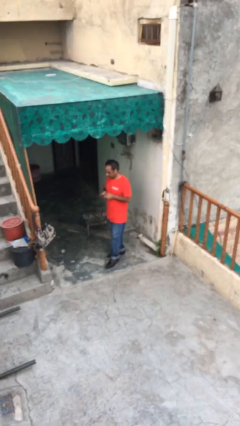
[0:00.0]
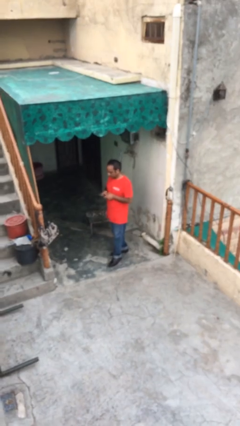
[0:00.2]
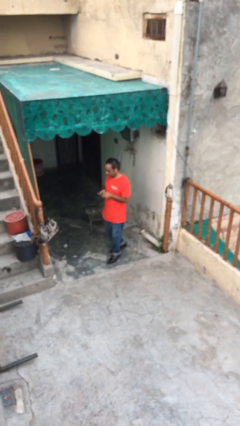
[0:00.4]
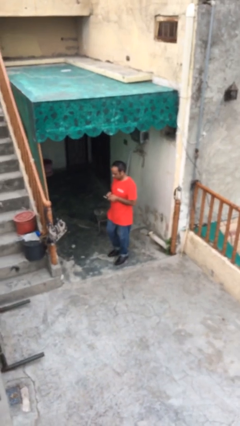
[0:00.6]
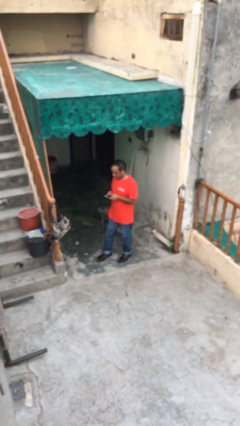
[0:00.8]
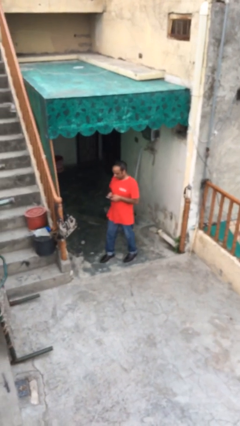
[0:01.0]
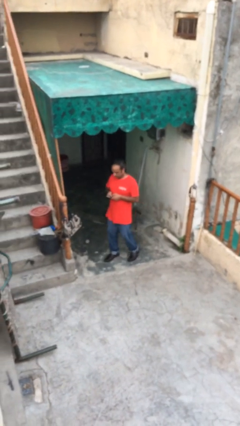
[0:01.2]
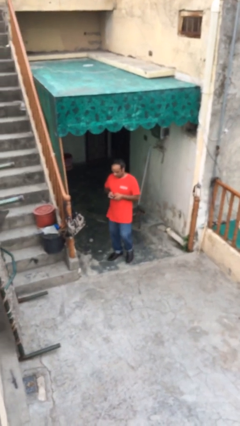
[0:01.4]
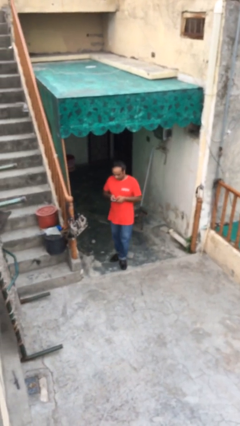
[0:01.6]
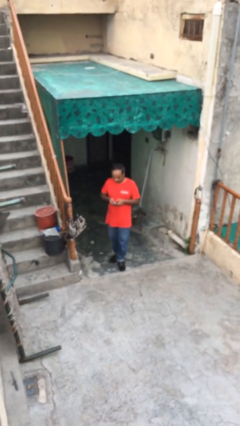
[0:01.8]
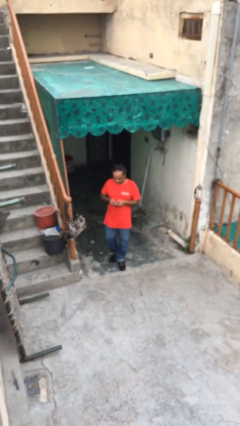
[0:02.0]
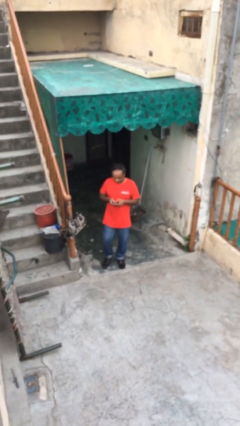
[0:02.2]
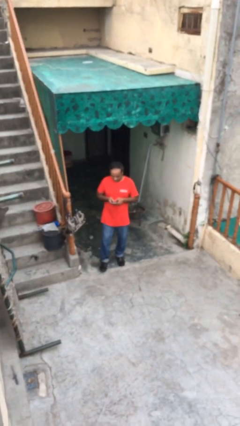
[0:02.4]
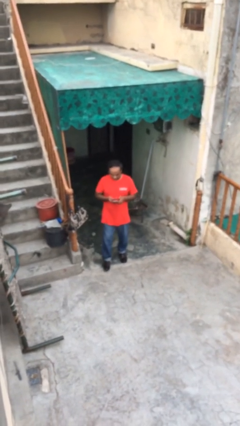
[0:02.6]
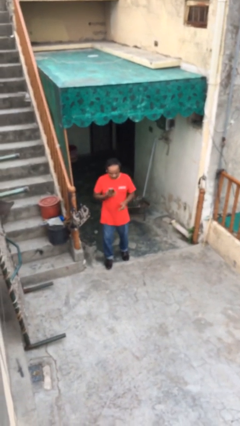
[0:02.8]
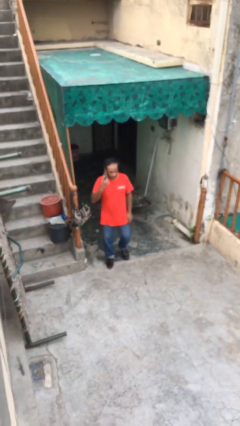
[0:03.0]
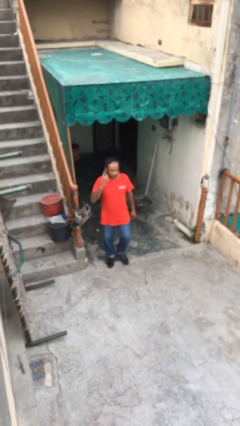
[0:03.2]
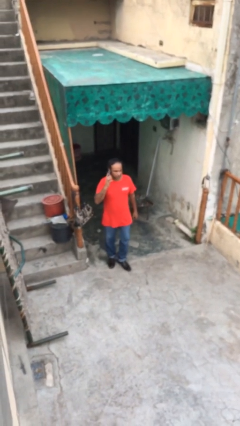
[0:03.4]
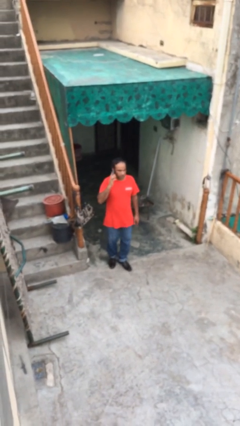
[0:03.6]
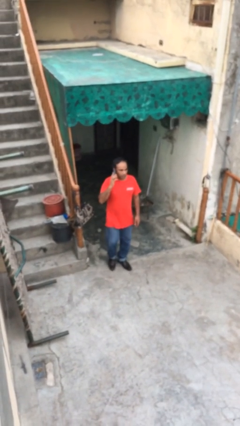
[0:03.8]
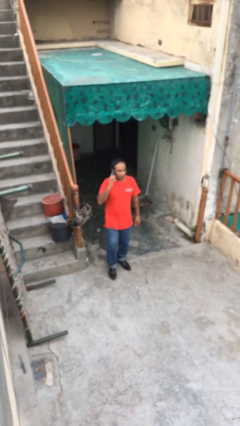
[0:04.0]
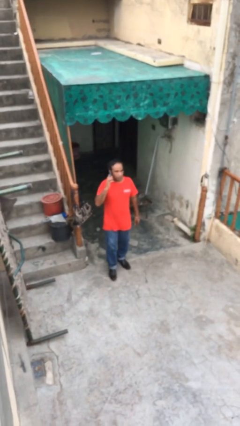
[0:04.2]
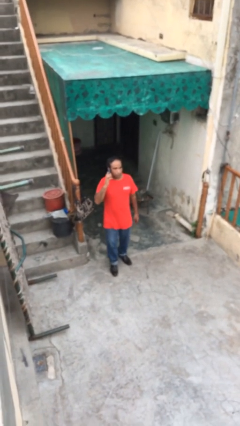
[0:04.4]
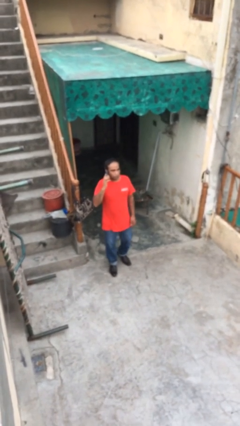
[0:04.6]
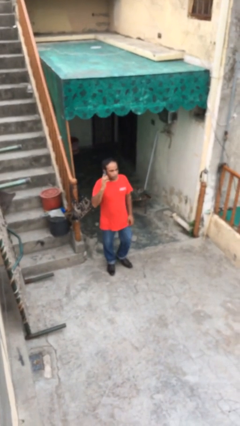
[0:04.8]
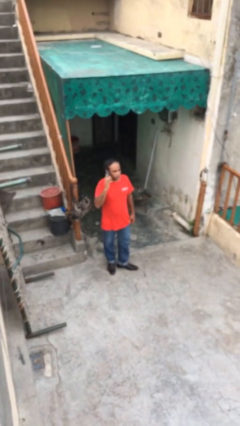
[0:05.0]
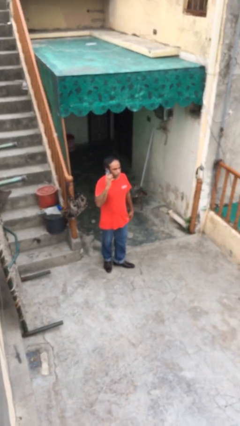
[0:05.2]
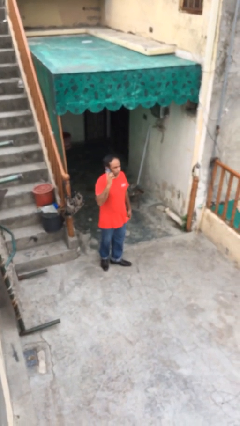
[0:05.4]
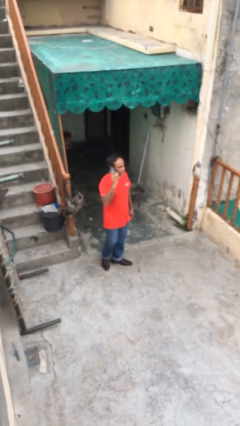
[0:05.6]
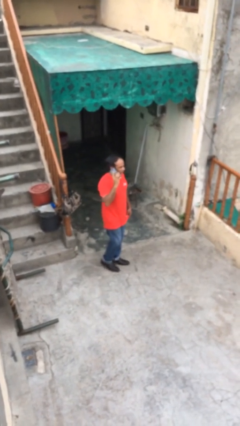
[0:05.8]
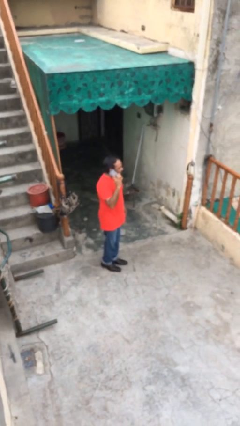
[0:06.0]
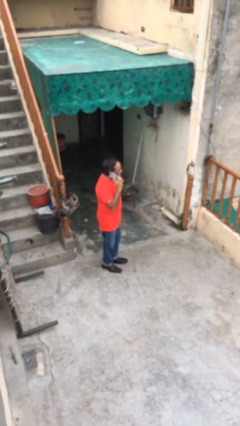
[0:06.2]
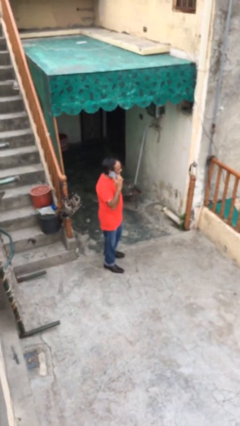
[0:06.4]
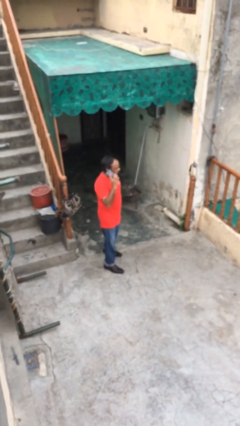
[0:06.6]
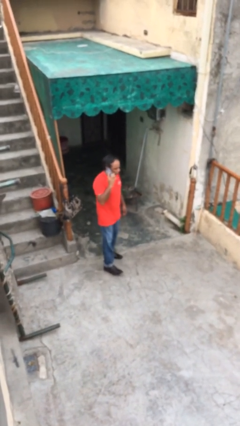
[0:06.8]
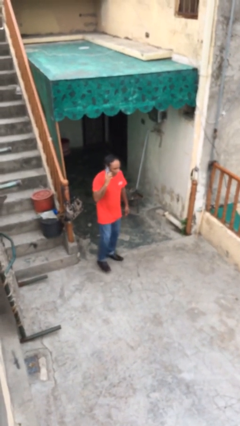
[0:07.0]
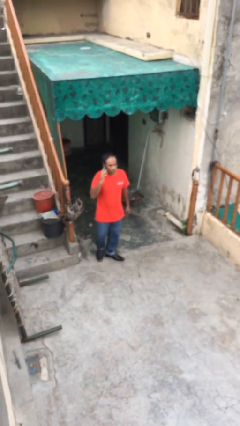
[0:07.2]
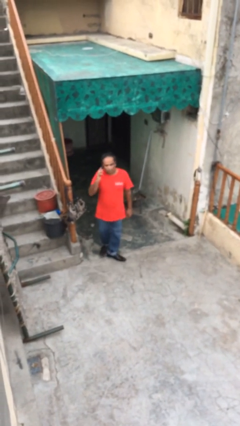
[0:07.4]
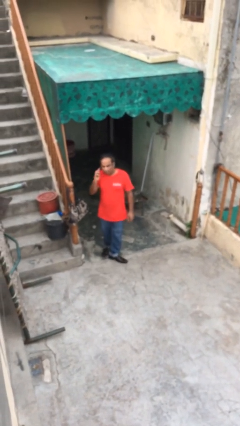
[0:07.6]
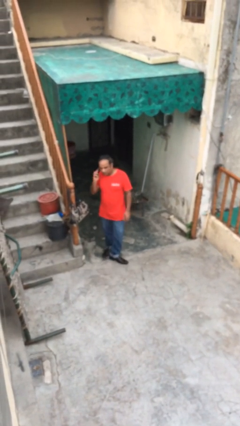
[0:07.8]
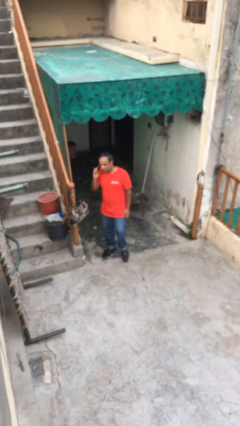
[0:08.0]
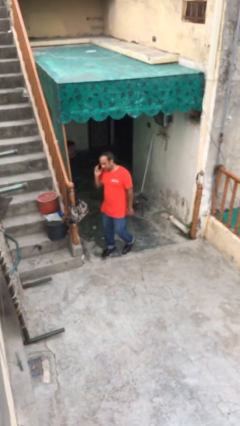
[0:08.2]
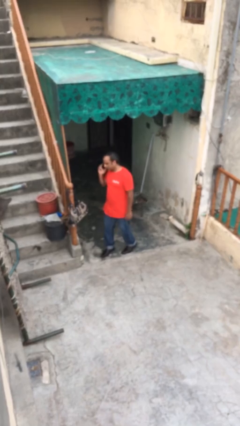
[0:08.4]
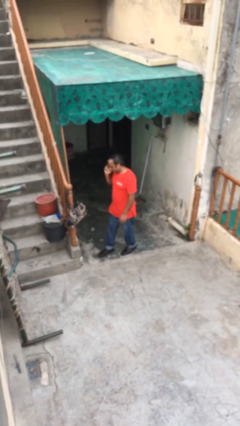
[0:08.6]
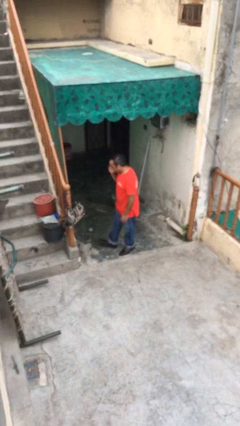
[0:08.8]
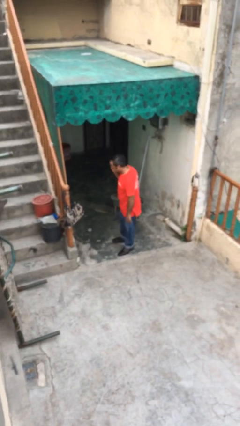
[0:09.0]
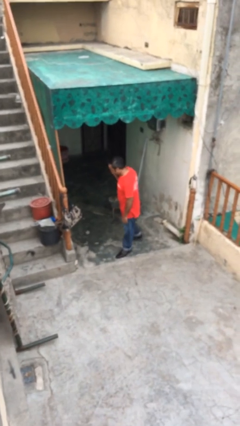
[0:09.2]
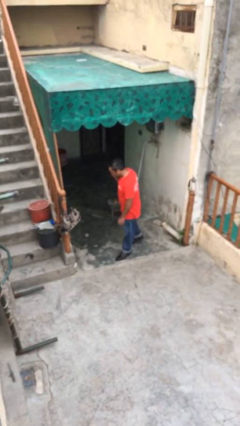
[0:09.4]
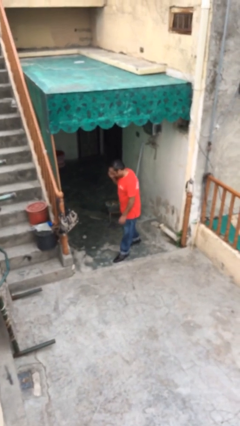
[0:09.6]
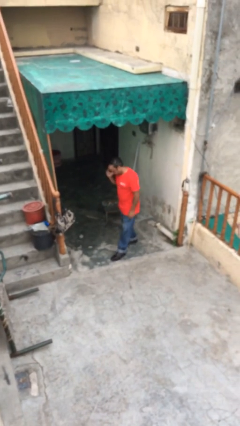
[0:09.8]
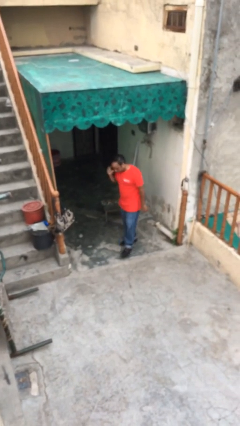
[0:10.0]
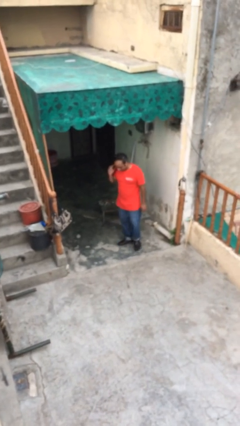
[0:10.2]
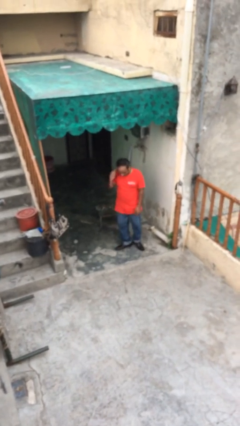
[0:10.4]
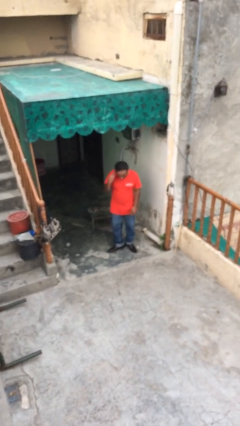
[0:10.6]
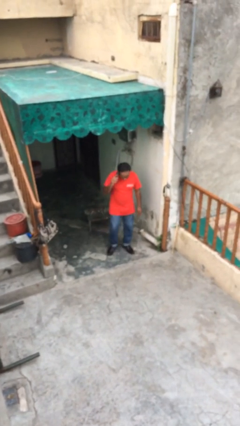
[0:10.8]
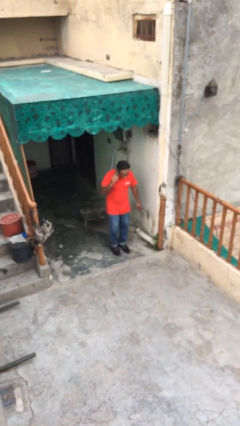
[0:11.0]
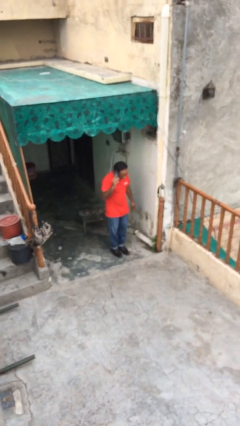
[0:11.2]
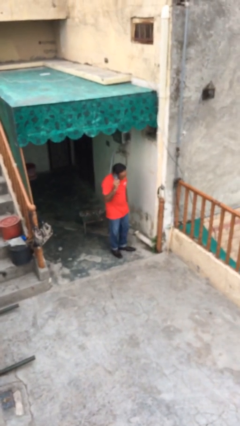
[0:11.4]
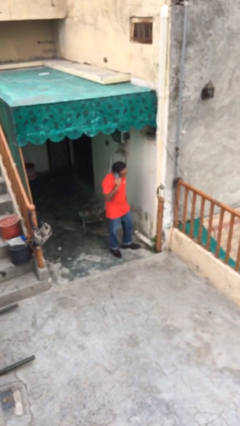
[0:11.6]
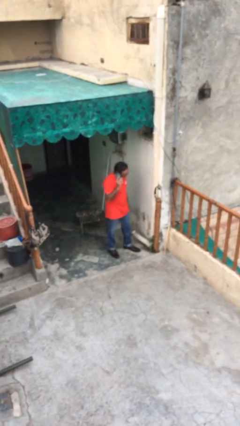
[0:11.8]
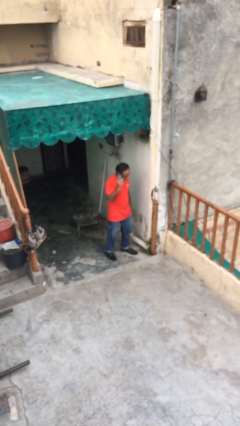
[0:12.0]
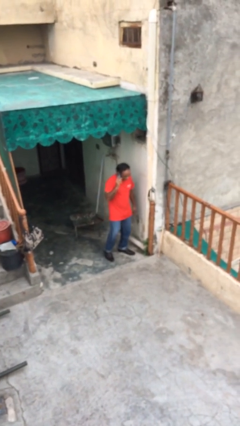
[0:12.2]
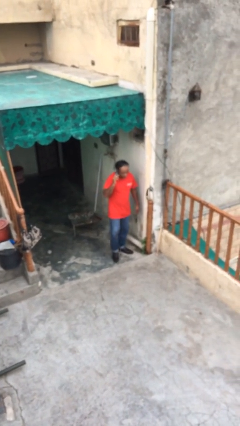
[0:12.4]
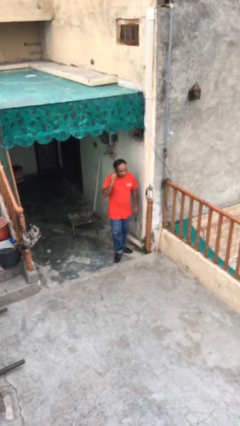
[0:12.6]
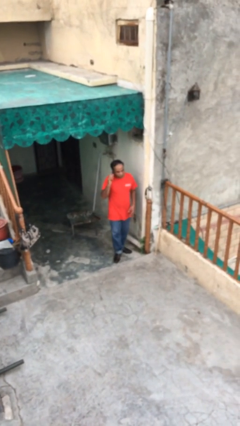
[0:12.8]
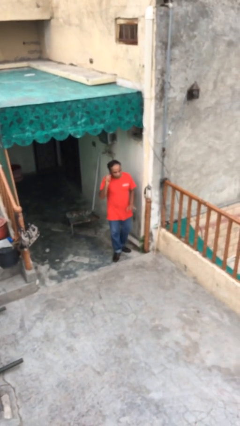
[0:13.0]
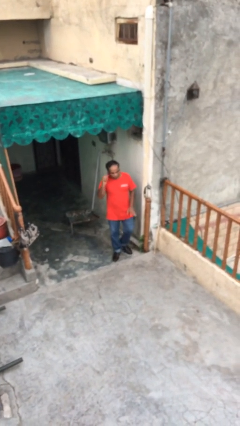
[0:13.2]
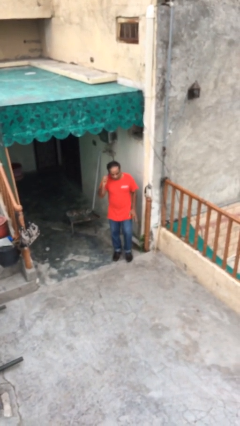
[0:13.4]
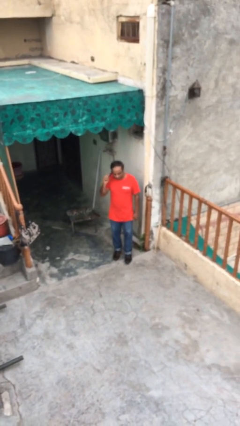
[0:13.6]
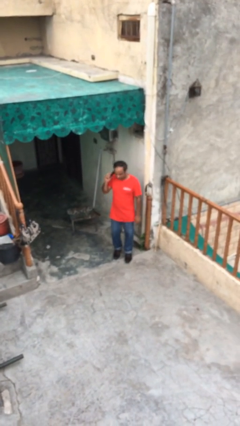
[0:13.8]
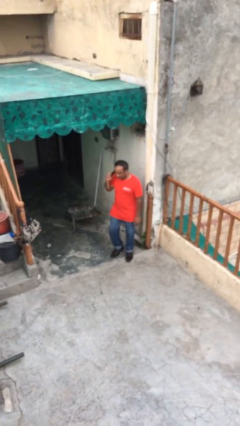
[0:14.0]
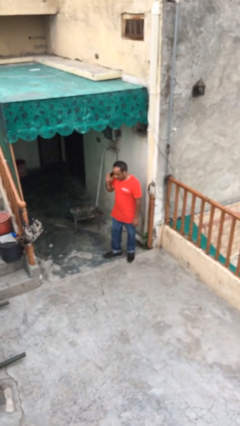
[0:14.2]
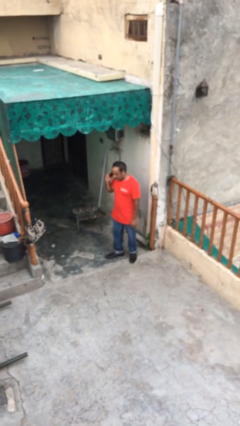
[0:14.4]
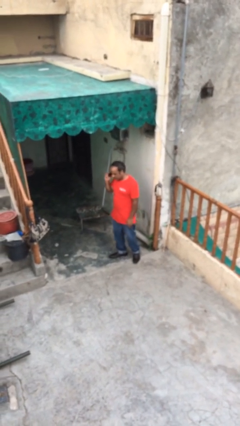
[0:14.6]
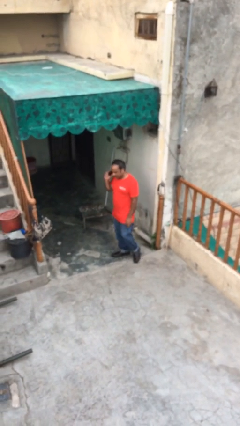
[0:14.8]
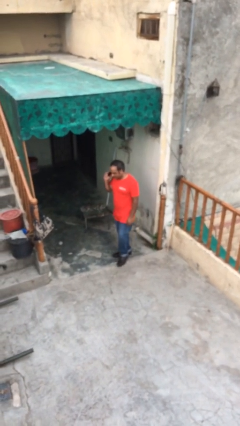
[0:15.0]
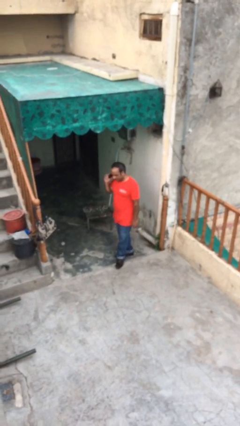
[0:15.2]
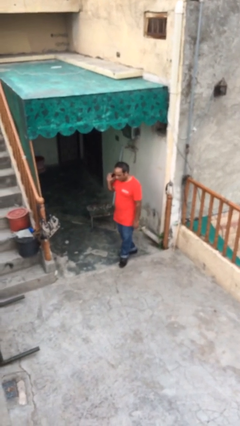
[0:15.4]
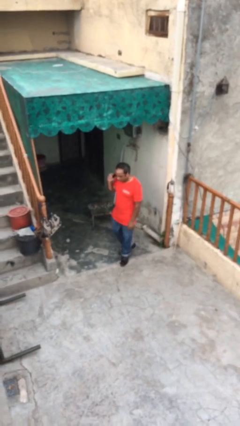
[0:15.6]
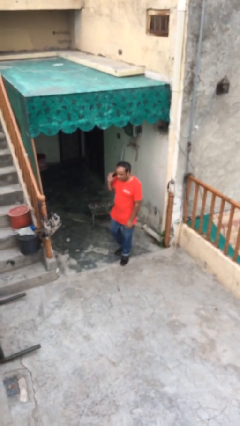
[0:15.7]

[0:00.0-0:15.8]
person talks on phone

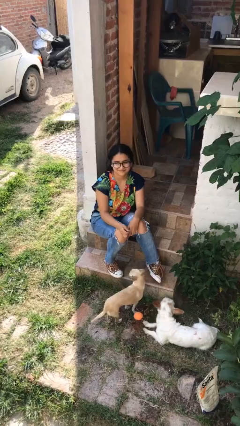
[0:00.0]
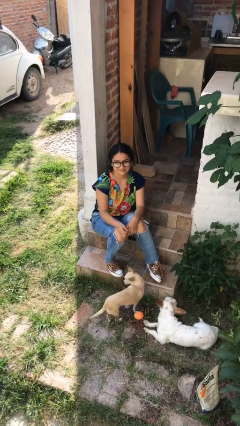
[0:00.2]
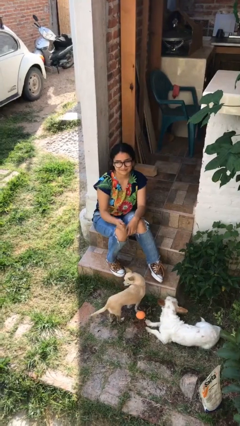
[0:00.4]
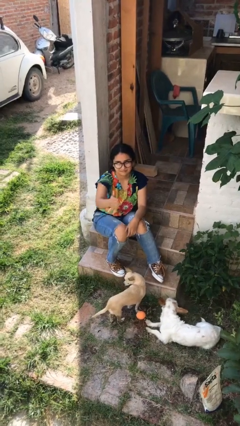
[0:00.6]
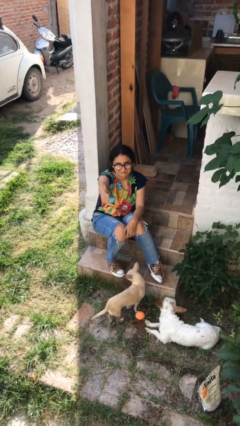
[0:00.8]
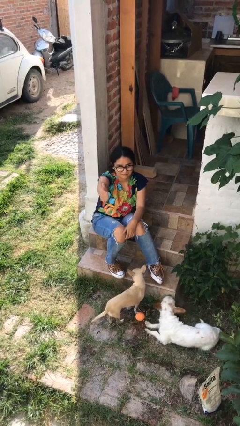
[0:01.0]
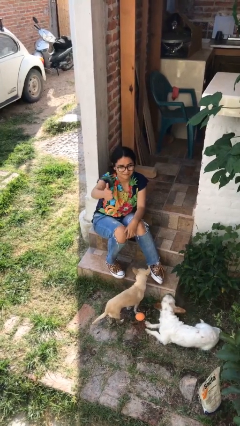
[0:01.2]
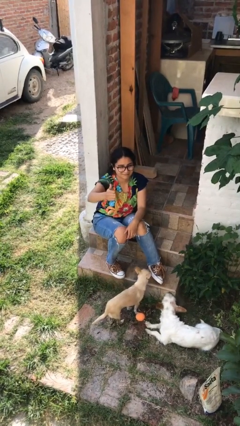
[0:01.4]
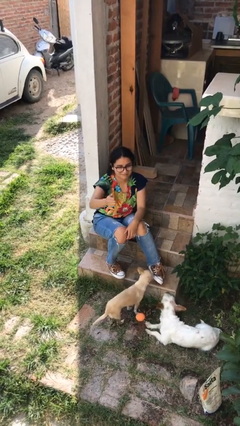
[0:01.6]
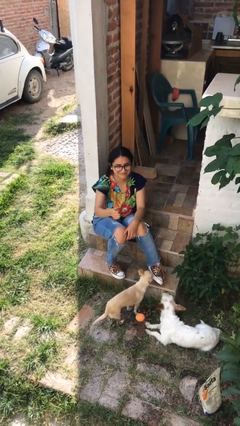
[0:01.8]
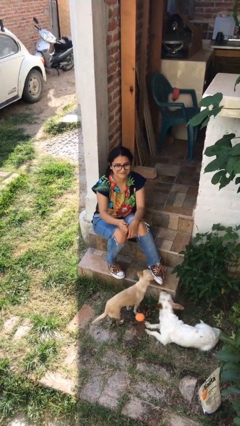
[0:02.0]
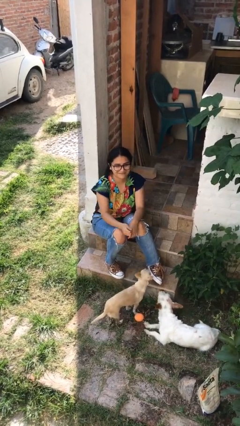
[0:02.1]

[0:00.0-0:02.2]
person gestures thumbs up

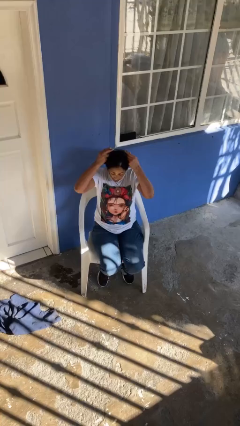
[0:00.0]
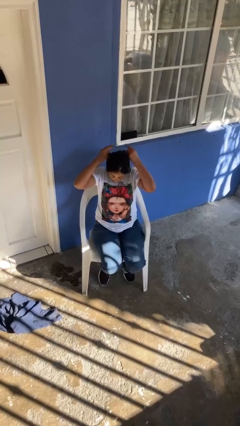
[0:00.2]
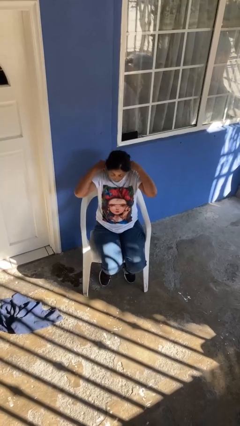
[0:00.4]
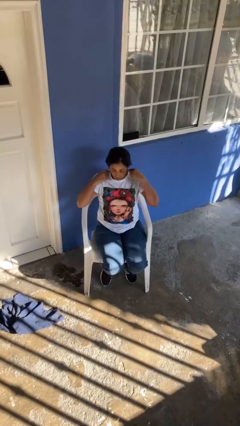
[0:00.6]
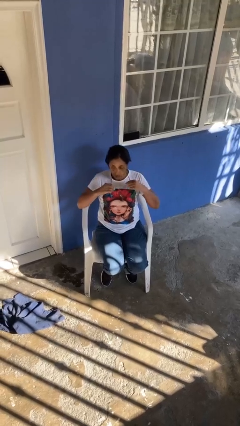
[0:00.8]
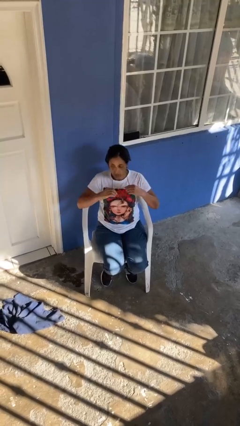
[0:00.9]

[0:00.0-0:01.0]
person puts on necklace
